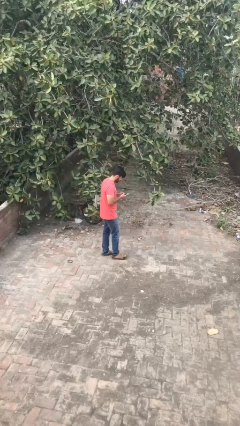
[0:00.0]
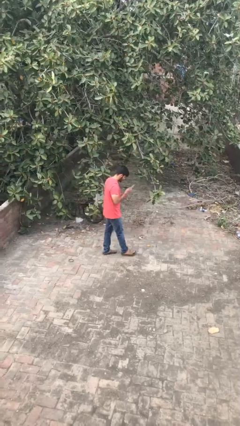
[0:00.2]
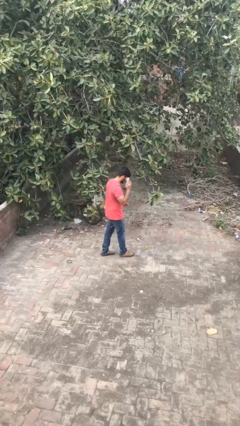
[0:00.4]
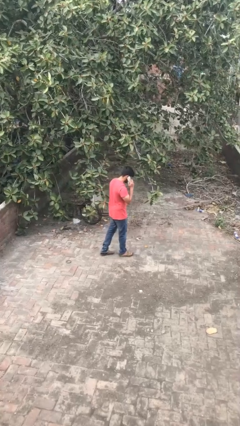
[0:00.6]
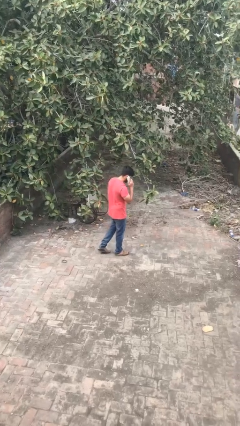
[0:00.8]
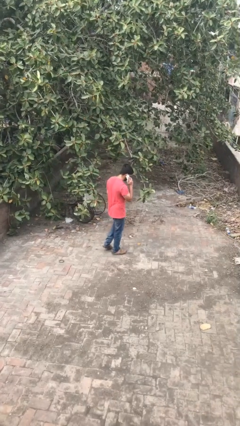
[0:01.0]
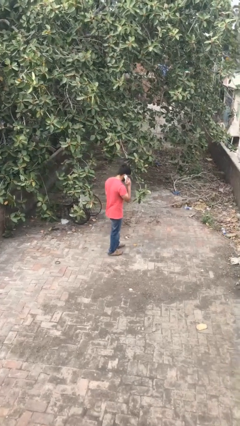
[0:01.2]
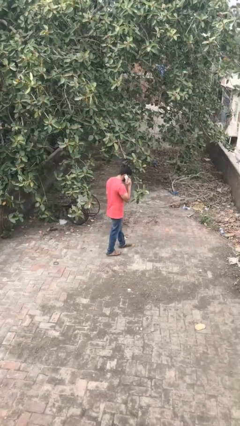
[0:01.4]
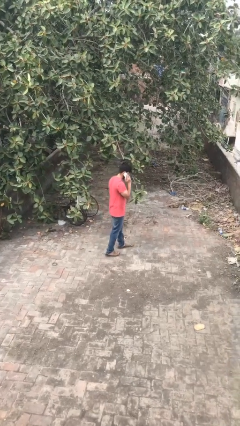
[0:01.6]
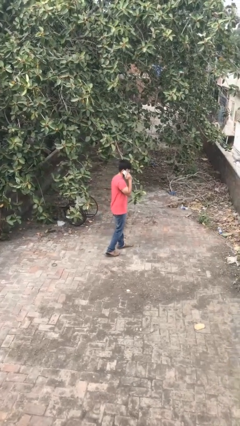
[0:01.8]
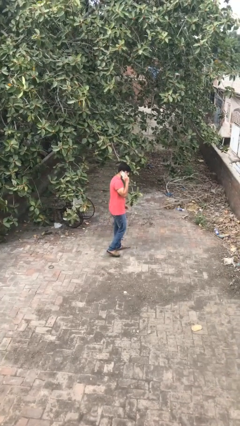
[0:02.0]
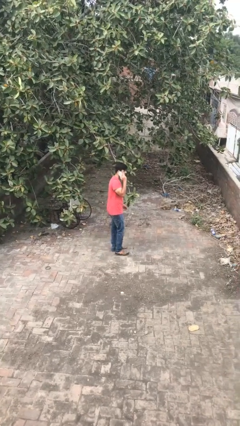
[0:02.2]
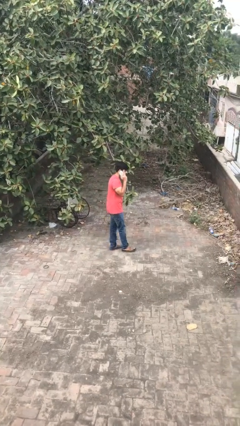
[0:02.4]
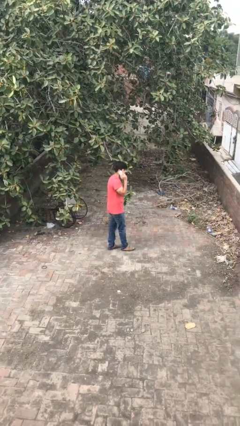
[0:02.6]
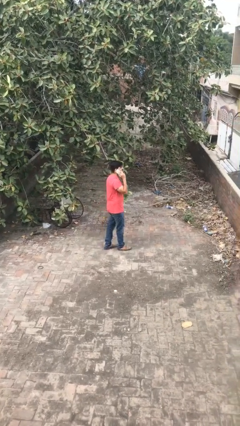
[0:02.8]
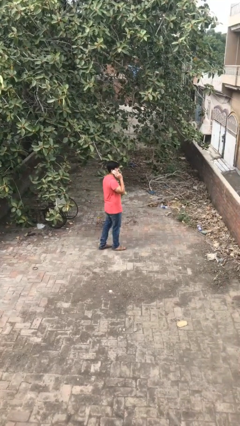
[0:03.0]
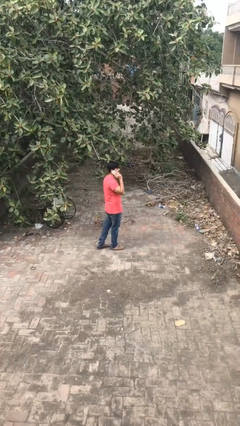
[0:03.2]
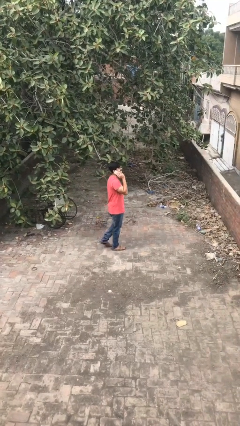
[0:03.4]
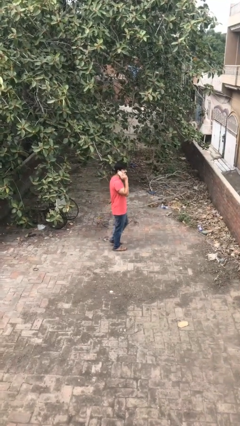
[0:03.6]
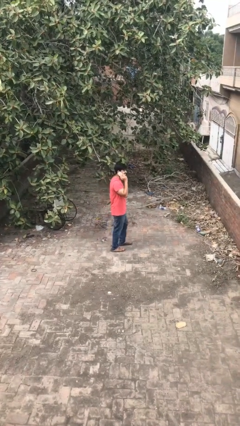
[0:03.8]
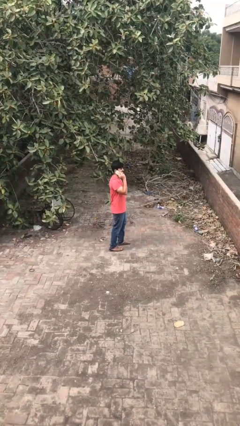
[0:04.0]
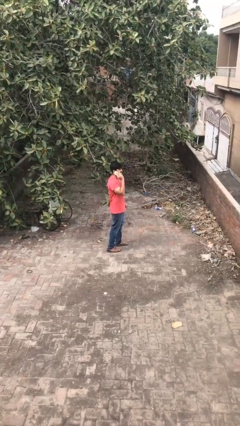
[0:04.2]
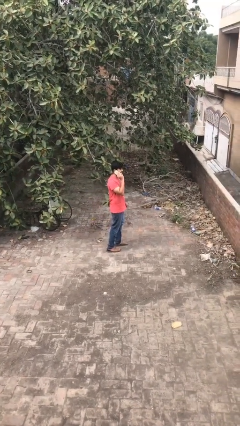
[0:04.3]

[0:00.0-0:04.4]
person talks on phone

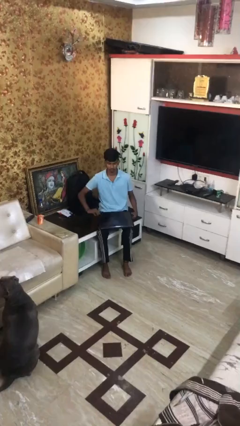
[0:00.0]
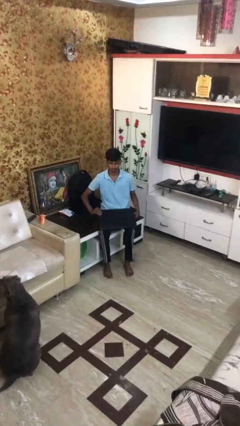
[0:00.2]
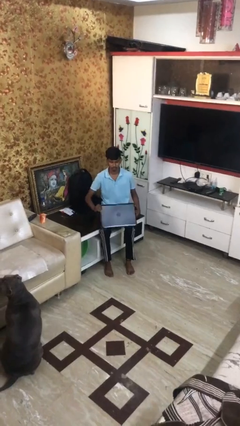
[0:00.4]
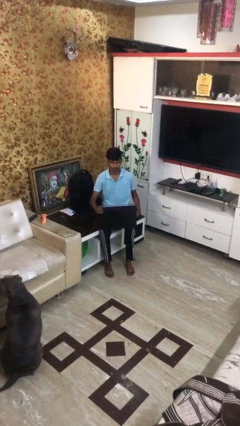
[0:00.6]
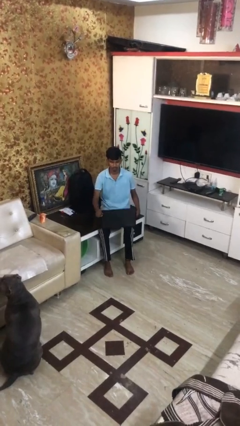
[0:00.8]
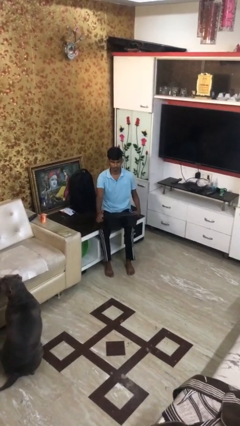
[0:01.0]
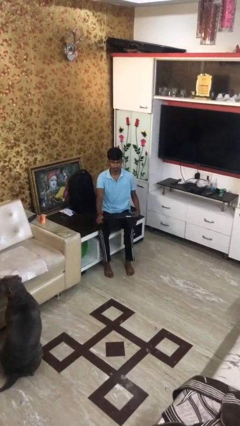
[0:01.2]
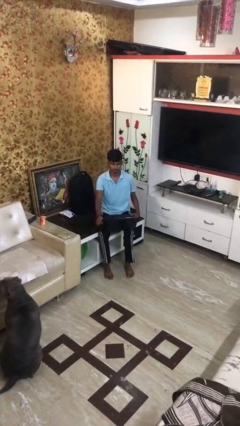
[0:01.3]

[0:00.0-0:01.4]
person opens laptop

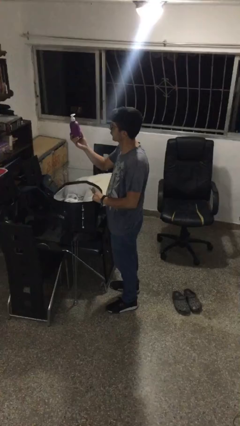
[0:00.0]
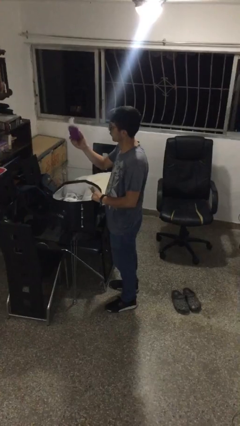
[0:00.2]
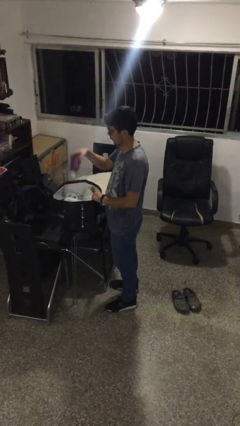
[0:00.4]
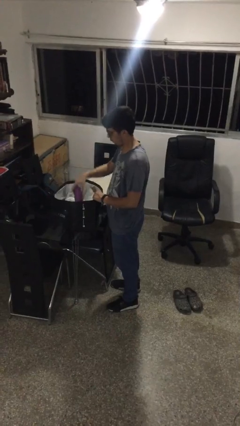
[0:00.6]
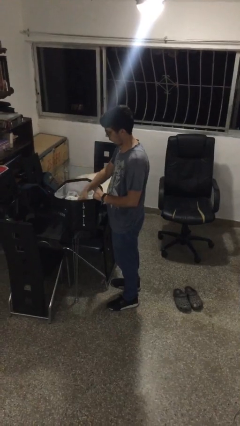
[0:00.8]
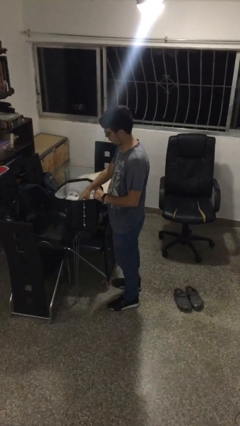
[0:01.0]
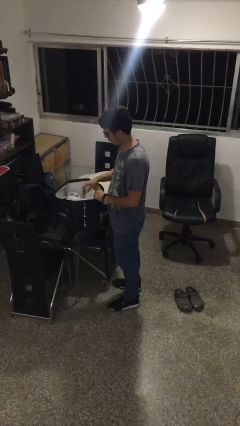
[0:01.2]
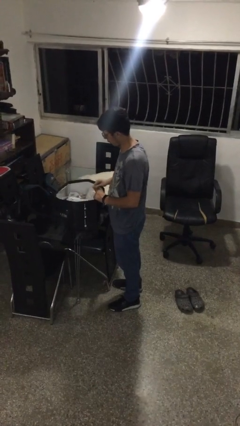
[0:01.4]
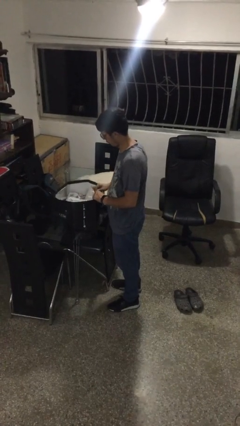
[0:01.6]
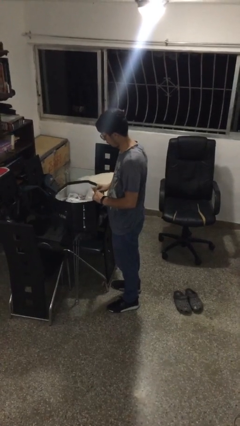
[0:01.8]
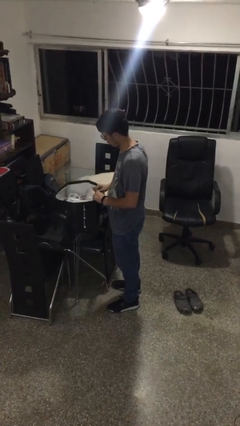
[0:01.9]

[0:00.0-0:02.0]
person puts object into bag

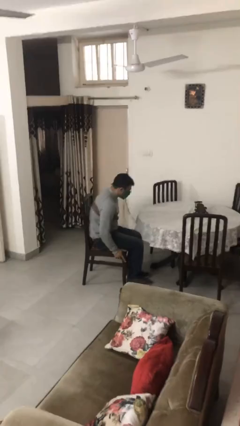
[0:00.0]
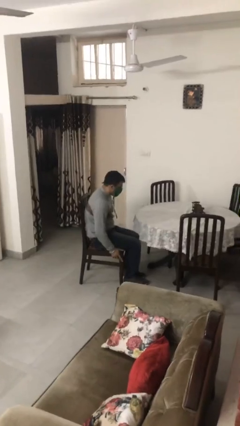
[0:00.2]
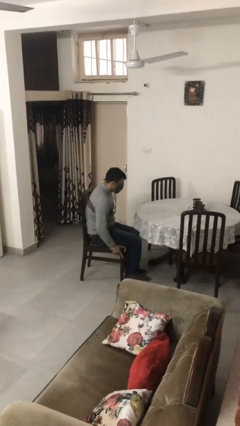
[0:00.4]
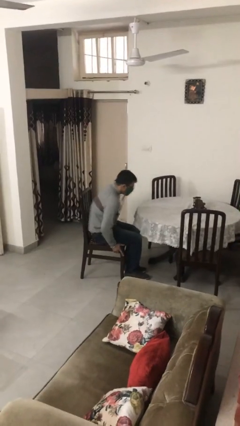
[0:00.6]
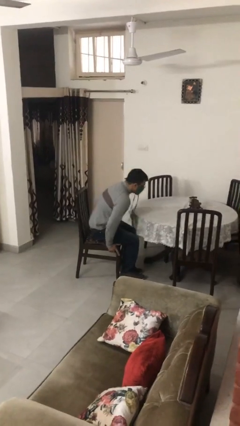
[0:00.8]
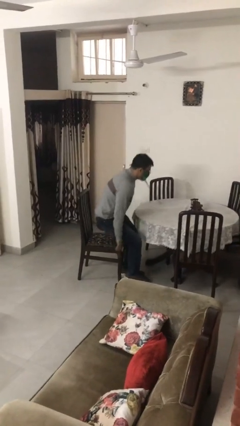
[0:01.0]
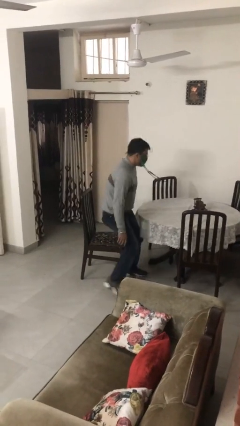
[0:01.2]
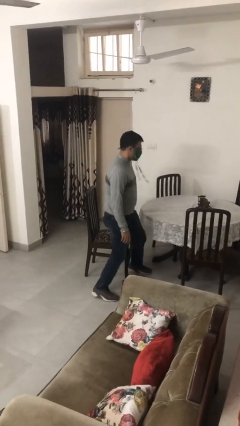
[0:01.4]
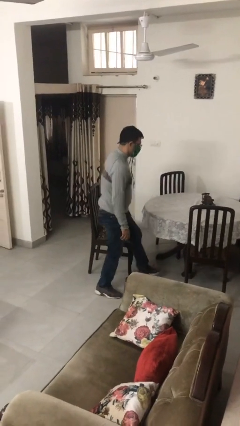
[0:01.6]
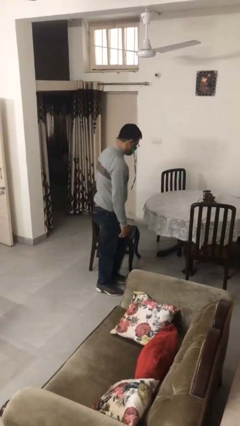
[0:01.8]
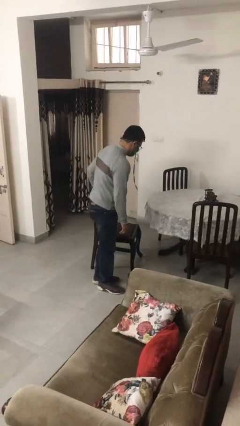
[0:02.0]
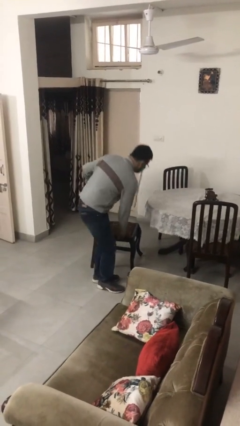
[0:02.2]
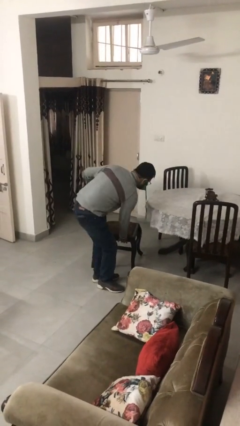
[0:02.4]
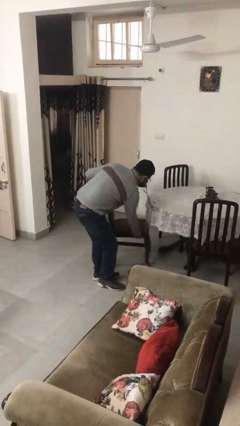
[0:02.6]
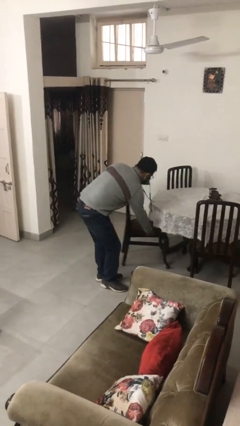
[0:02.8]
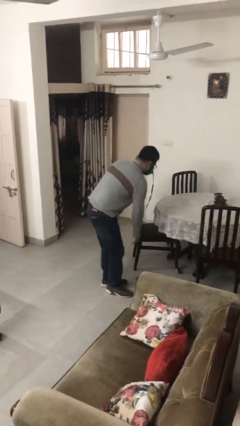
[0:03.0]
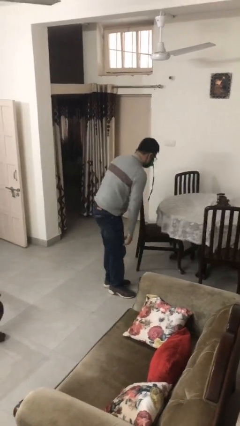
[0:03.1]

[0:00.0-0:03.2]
person stands up

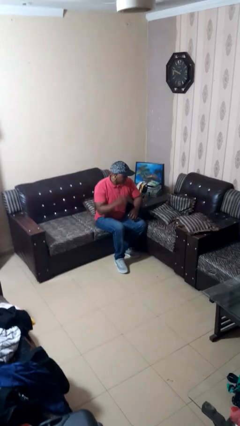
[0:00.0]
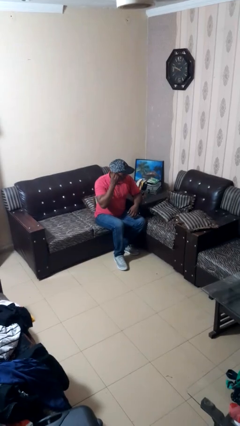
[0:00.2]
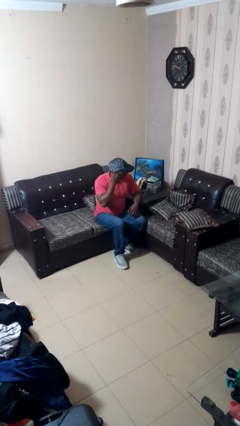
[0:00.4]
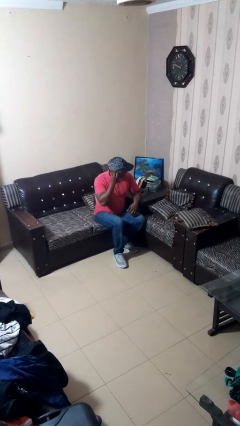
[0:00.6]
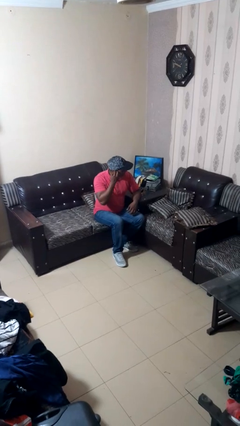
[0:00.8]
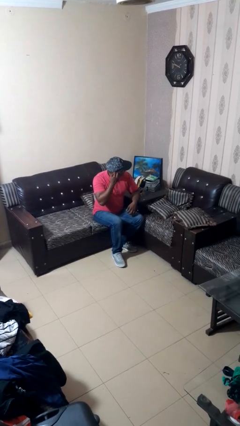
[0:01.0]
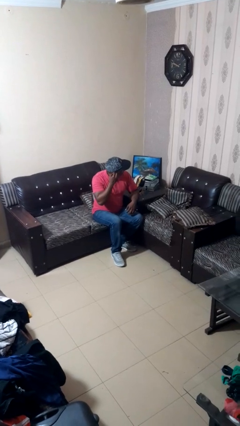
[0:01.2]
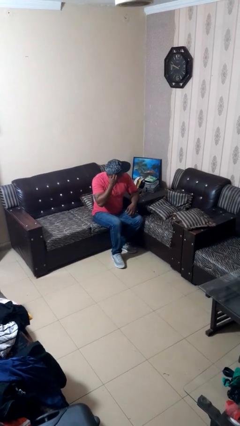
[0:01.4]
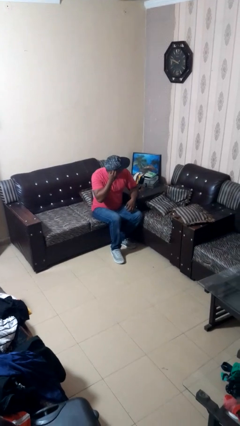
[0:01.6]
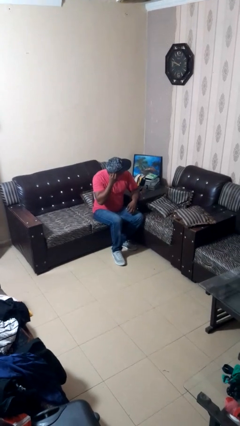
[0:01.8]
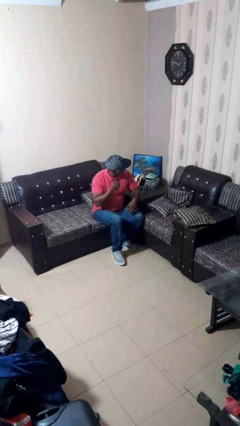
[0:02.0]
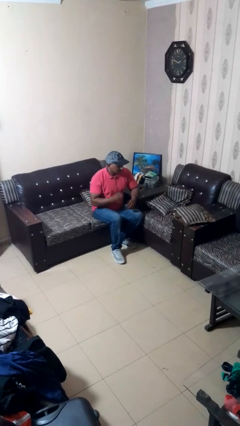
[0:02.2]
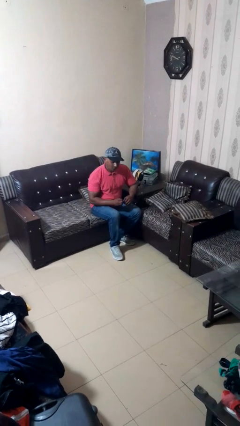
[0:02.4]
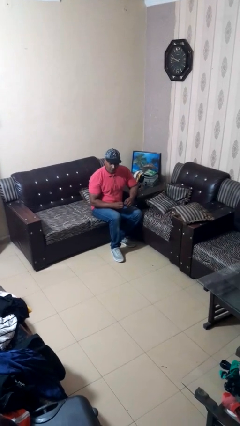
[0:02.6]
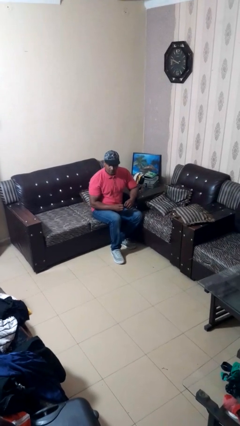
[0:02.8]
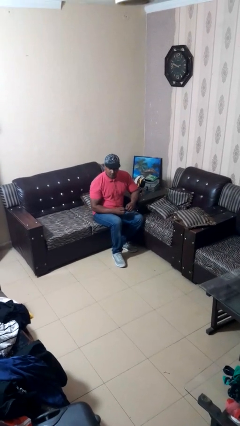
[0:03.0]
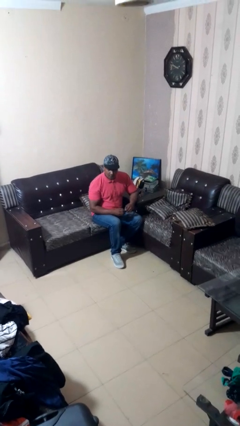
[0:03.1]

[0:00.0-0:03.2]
person takes off earrings

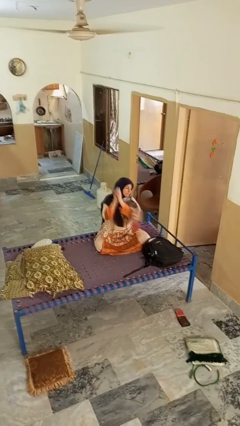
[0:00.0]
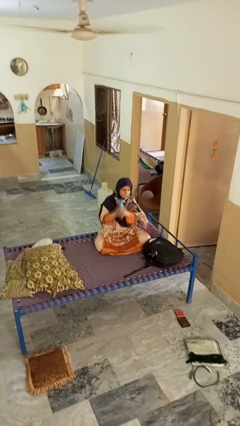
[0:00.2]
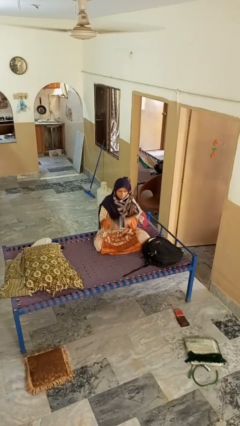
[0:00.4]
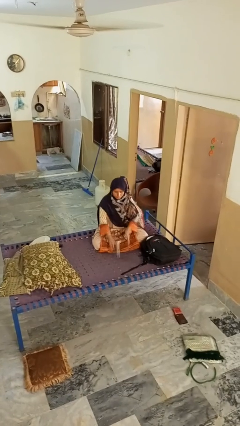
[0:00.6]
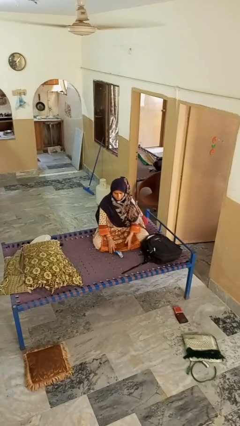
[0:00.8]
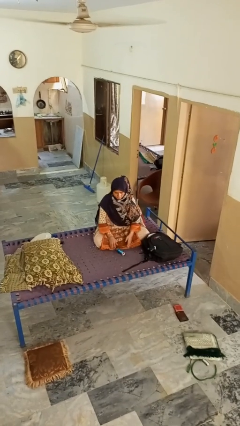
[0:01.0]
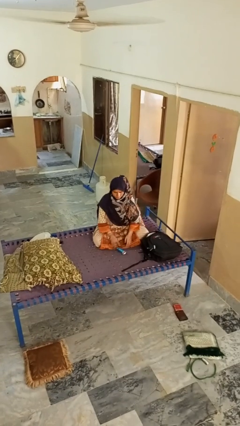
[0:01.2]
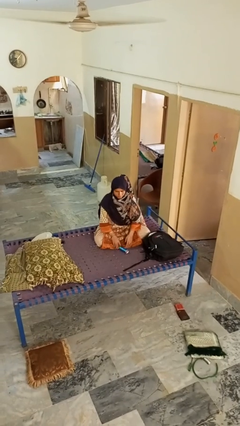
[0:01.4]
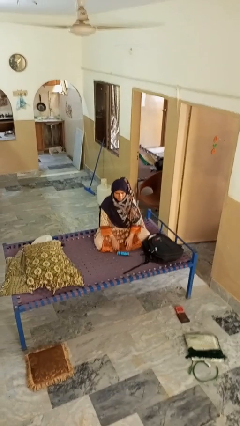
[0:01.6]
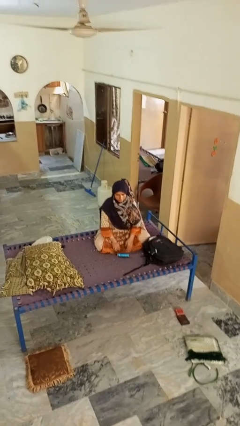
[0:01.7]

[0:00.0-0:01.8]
person catches dropped object

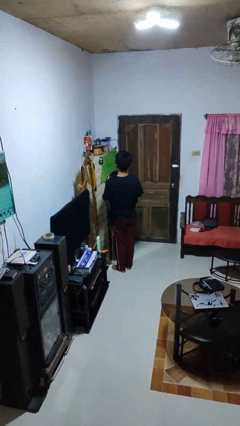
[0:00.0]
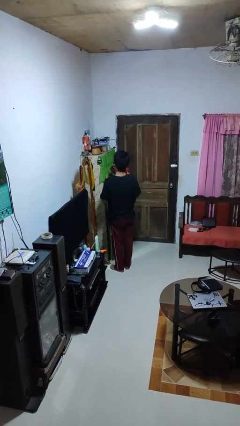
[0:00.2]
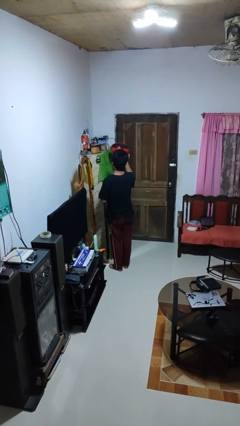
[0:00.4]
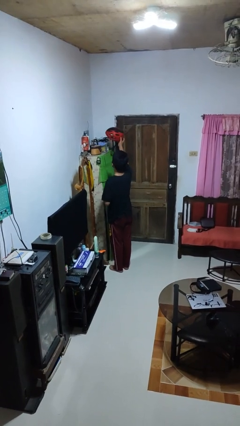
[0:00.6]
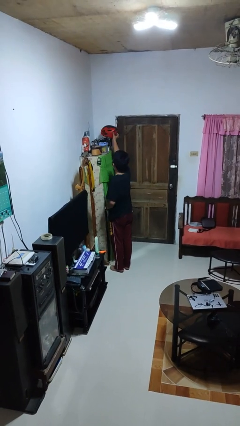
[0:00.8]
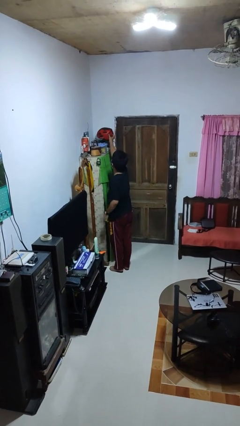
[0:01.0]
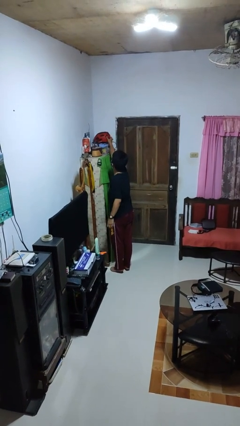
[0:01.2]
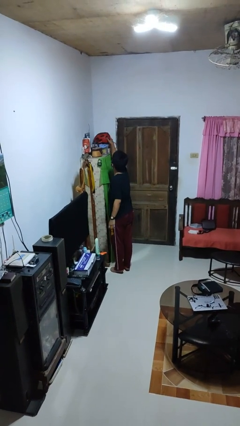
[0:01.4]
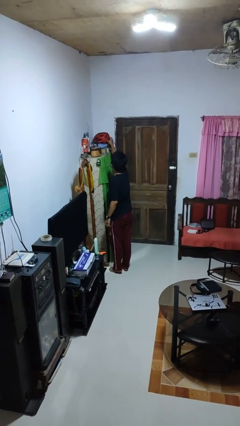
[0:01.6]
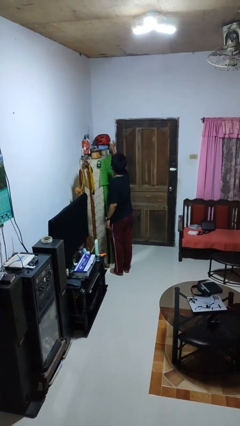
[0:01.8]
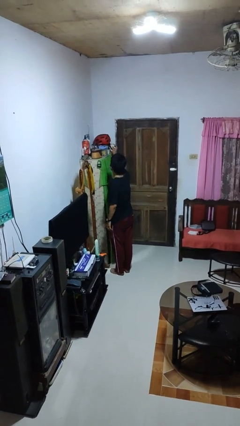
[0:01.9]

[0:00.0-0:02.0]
person puts down object on shelf
